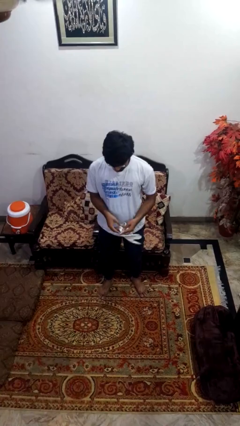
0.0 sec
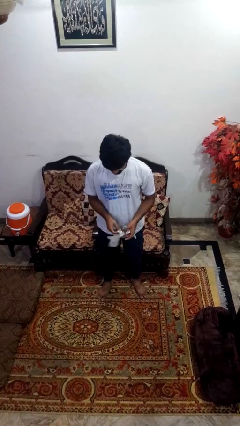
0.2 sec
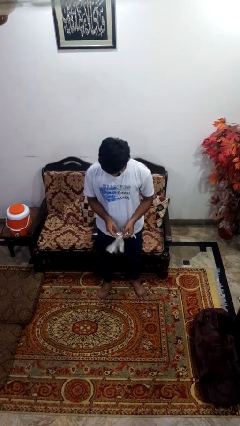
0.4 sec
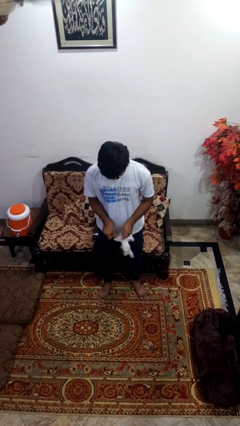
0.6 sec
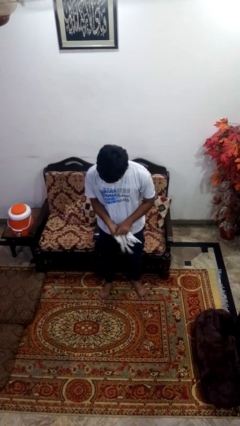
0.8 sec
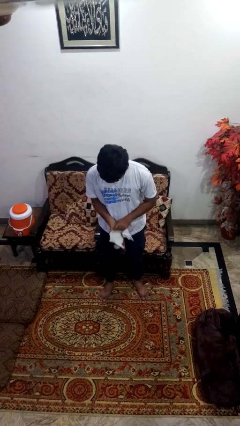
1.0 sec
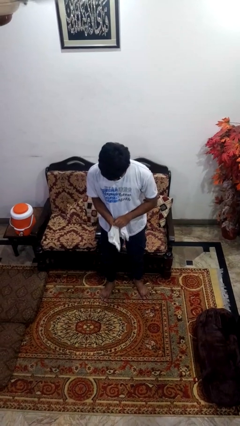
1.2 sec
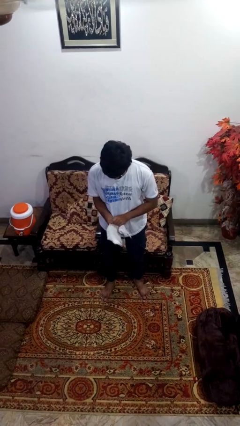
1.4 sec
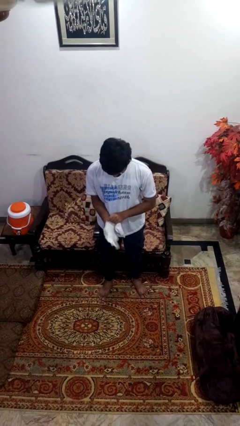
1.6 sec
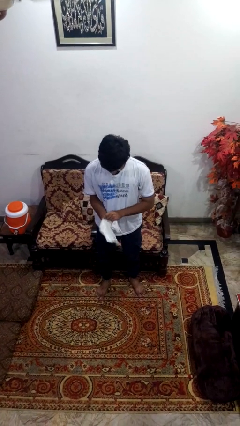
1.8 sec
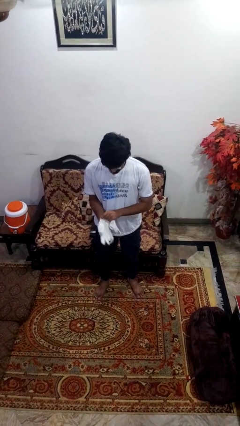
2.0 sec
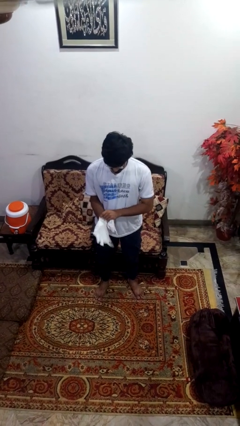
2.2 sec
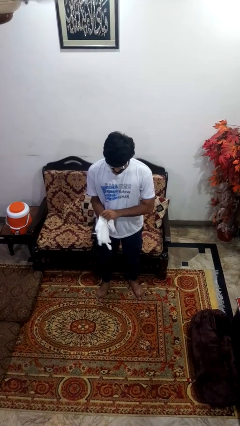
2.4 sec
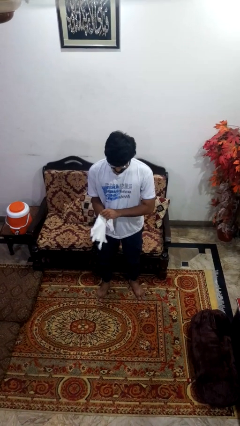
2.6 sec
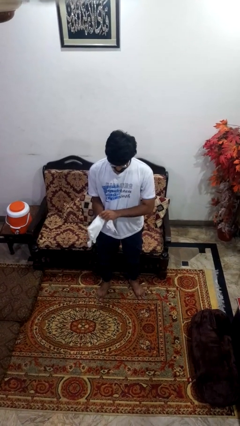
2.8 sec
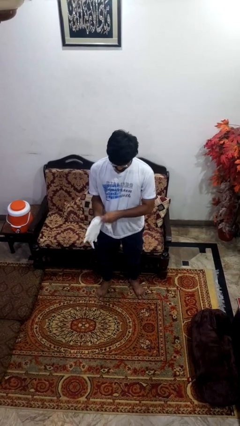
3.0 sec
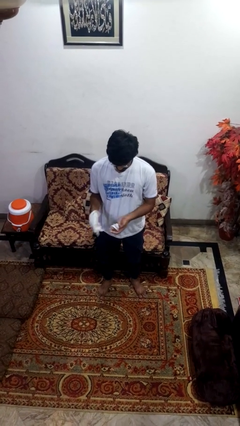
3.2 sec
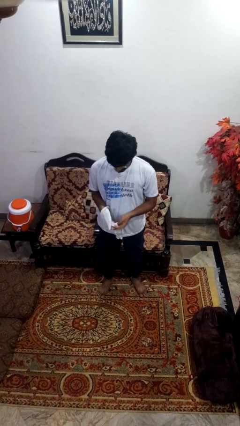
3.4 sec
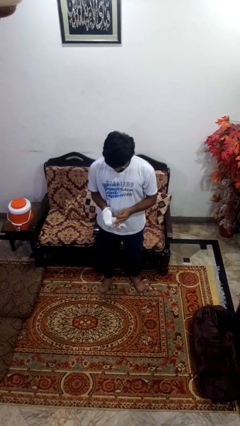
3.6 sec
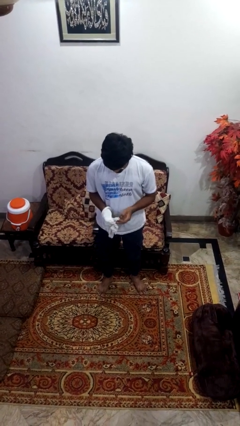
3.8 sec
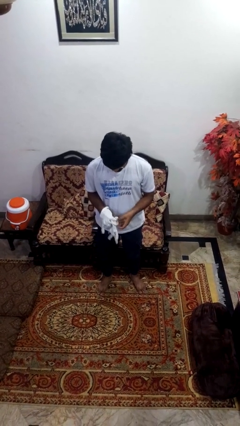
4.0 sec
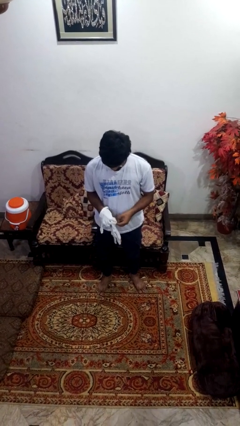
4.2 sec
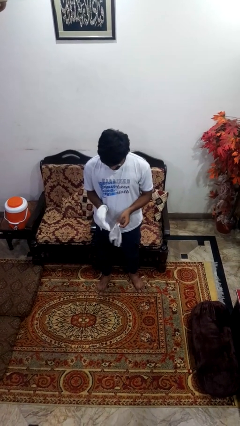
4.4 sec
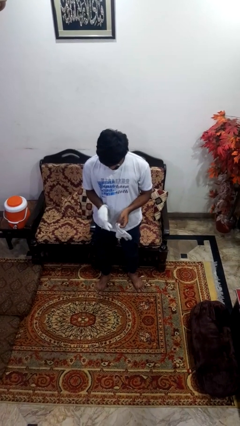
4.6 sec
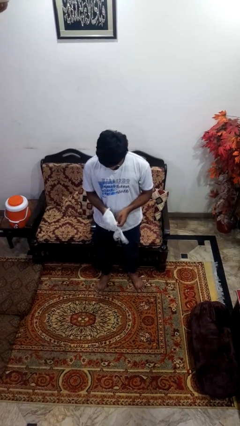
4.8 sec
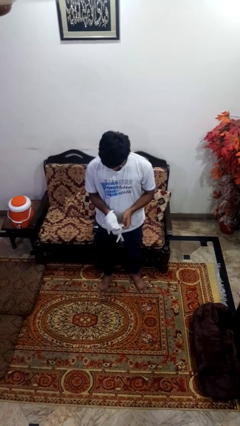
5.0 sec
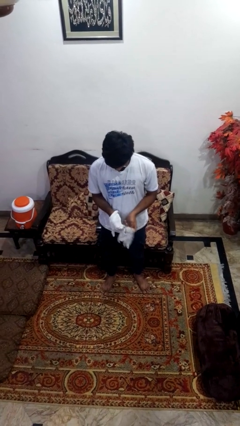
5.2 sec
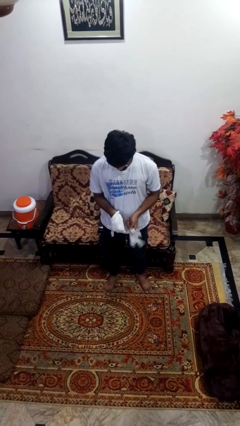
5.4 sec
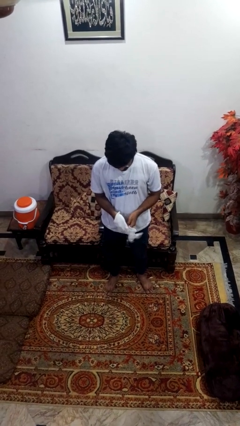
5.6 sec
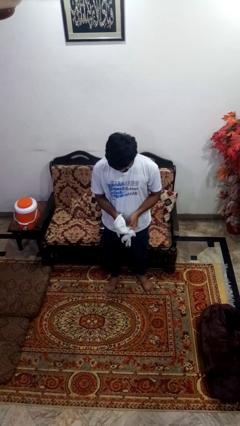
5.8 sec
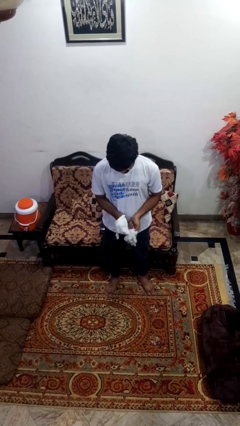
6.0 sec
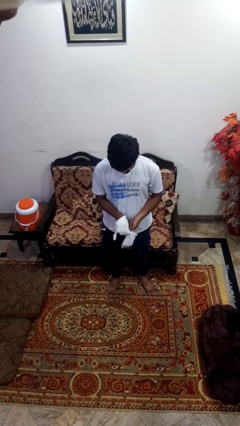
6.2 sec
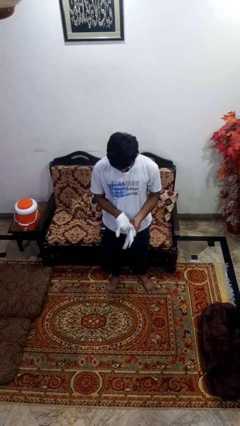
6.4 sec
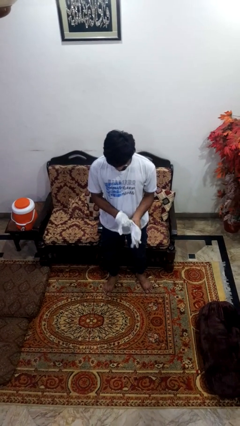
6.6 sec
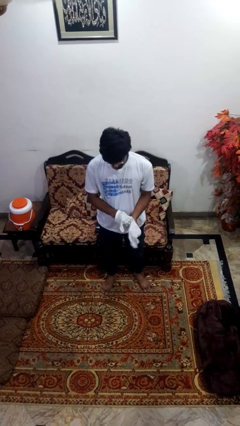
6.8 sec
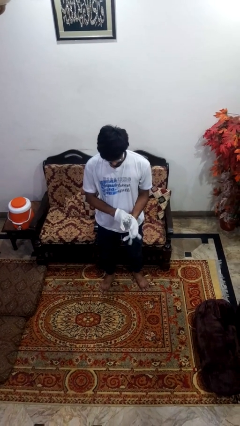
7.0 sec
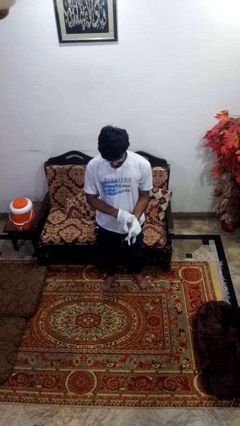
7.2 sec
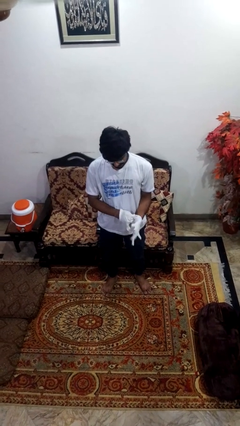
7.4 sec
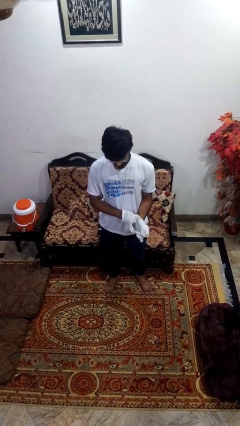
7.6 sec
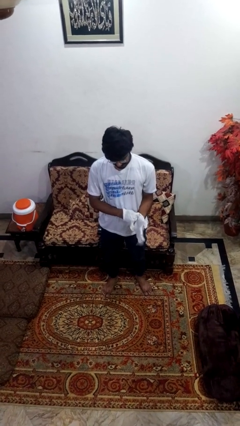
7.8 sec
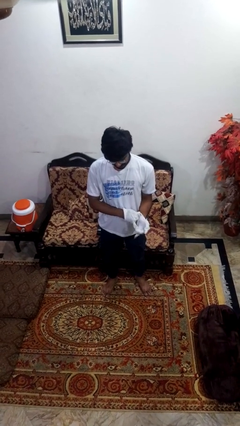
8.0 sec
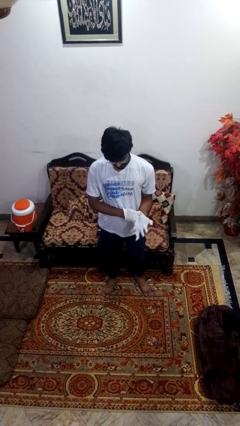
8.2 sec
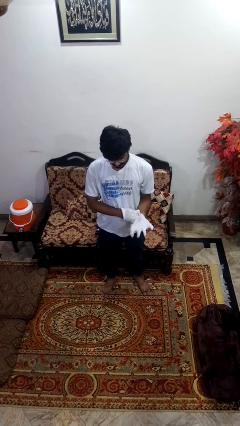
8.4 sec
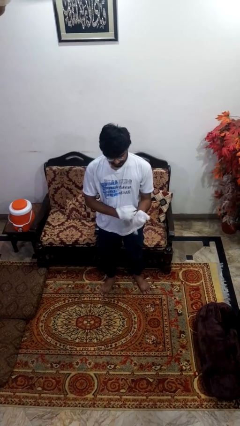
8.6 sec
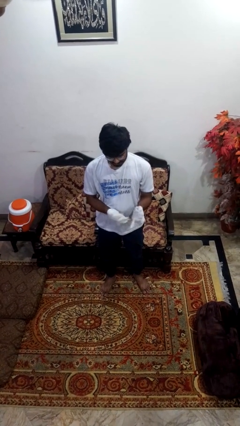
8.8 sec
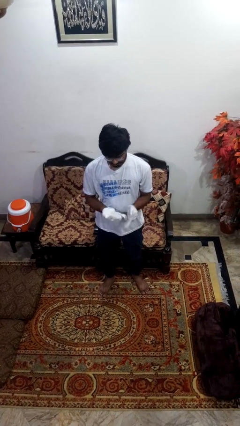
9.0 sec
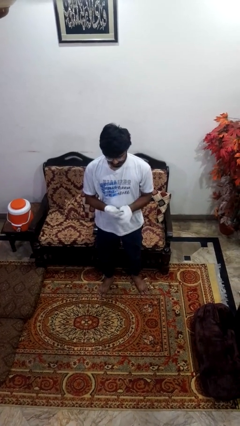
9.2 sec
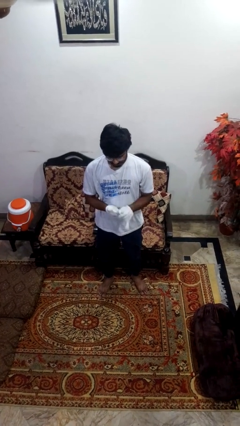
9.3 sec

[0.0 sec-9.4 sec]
person puts on gloves

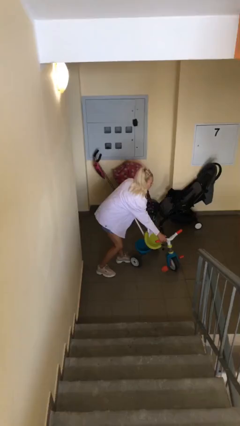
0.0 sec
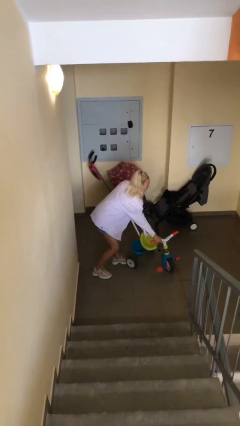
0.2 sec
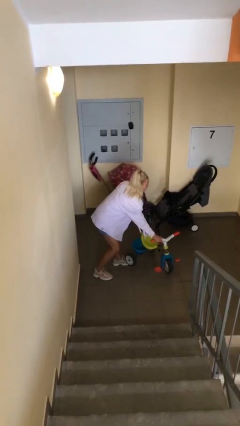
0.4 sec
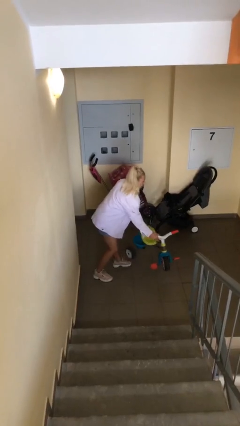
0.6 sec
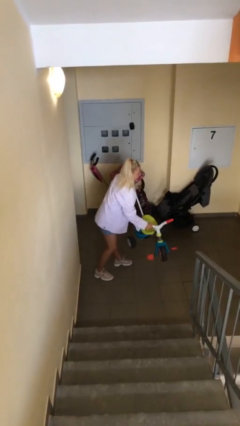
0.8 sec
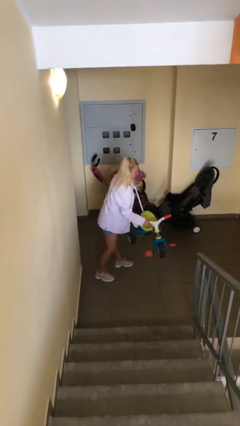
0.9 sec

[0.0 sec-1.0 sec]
person picks up object from floor

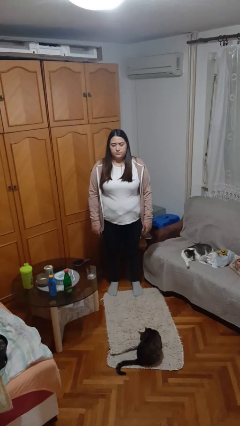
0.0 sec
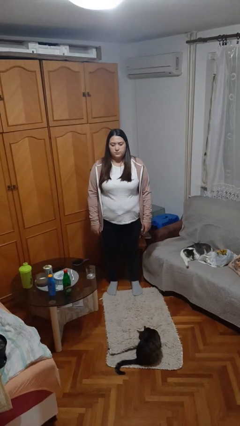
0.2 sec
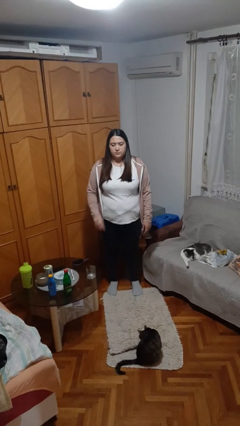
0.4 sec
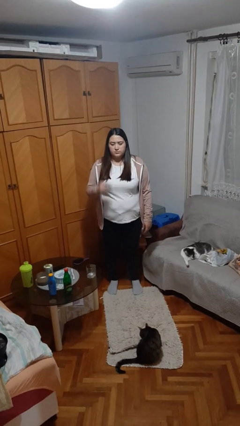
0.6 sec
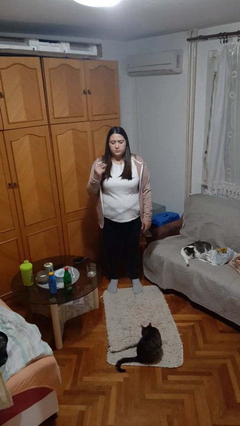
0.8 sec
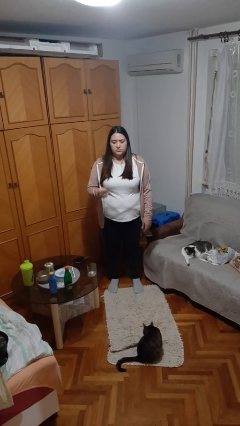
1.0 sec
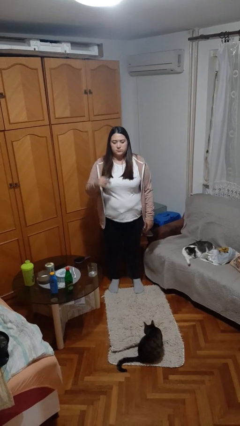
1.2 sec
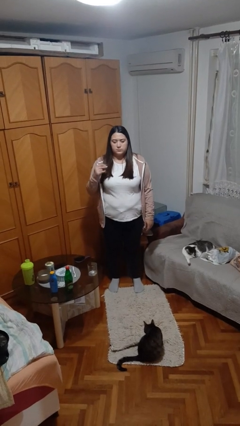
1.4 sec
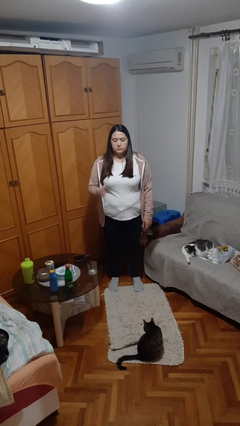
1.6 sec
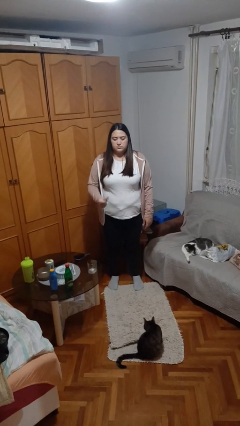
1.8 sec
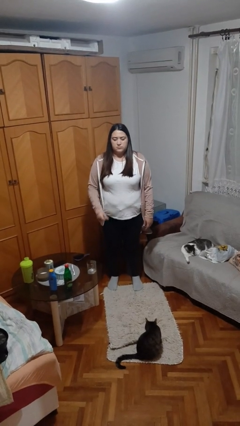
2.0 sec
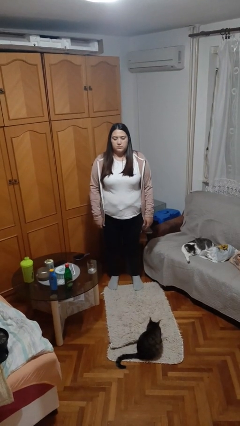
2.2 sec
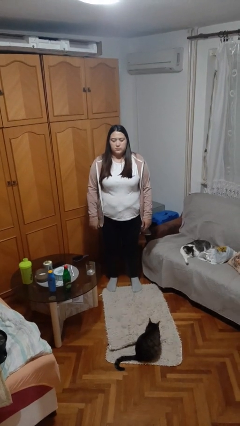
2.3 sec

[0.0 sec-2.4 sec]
person snaps fingers

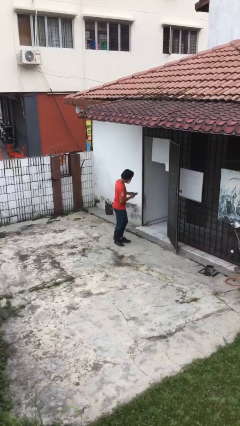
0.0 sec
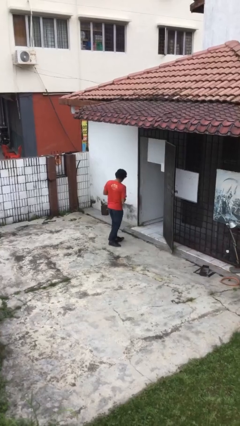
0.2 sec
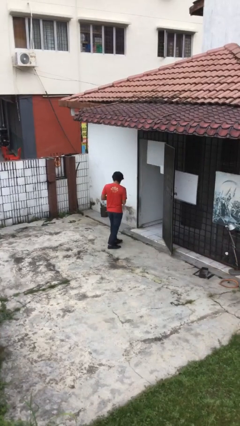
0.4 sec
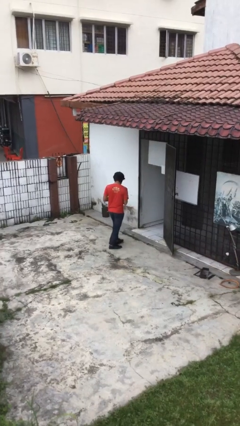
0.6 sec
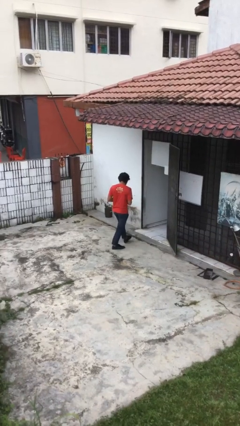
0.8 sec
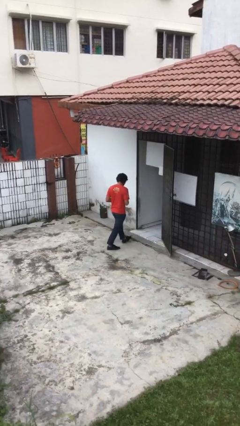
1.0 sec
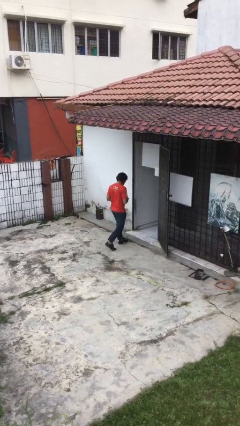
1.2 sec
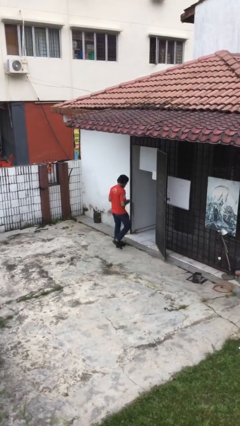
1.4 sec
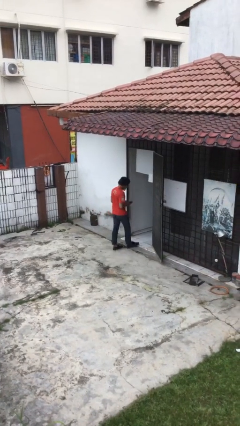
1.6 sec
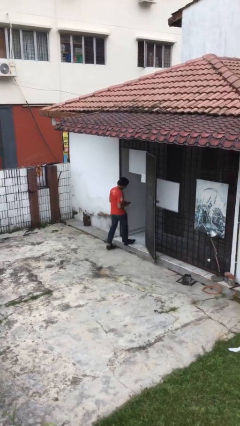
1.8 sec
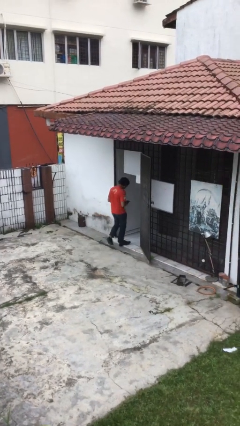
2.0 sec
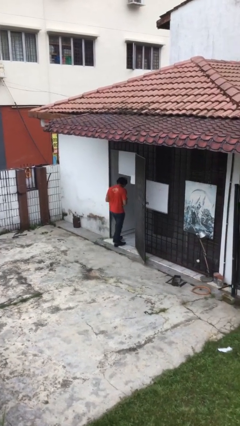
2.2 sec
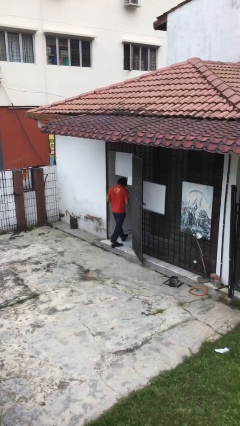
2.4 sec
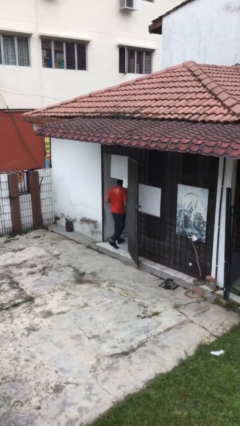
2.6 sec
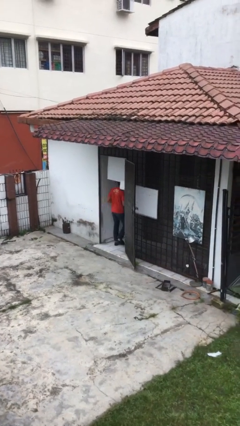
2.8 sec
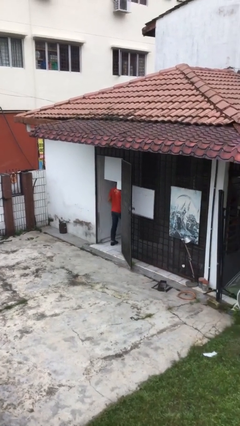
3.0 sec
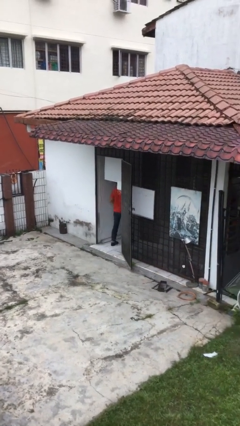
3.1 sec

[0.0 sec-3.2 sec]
person exits scene through structure

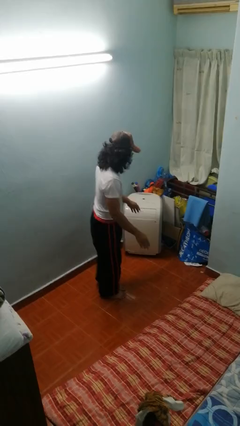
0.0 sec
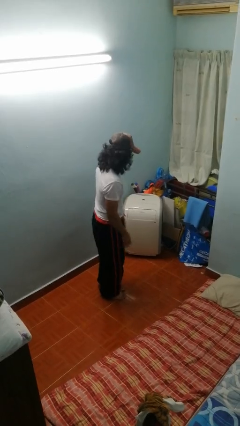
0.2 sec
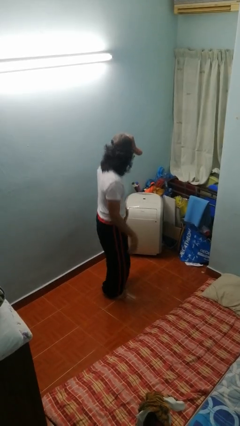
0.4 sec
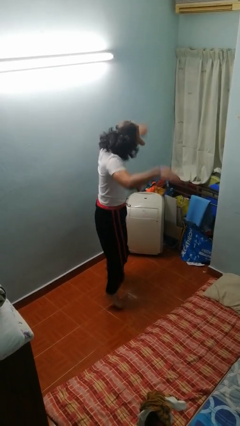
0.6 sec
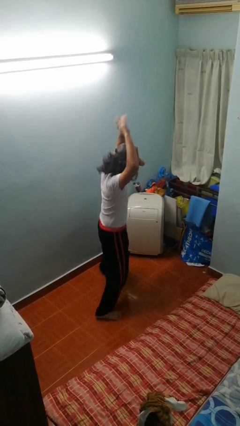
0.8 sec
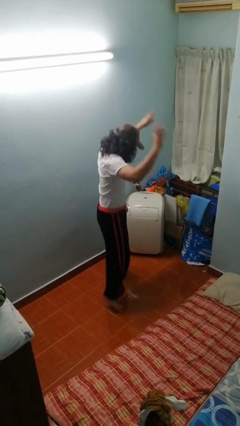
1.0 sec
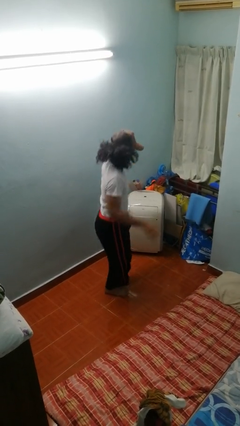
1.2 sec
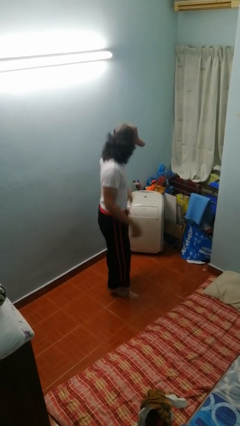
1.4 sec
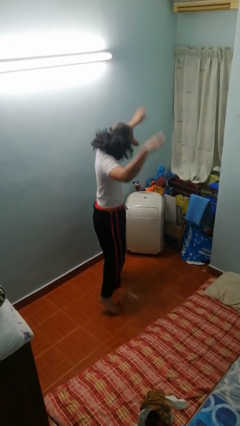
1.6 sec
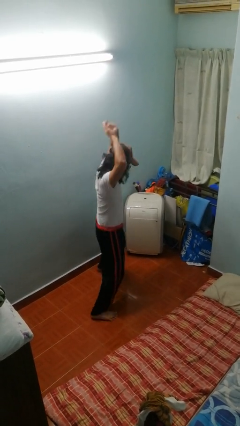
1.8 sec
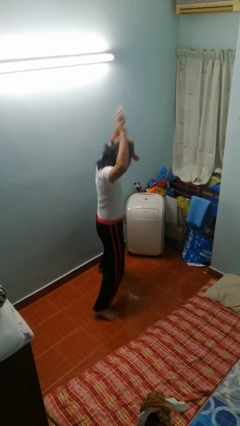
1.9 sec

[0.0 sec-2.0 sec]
person exercises with jumping jacks
